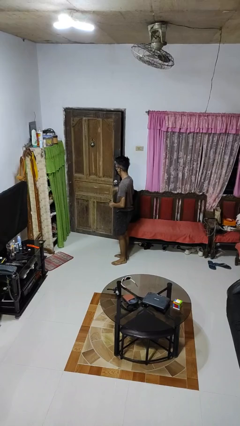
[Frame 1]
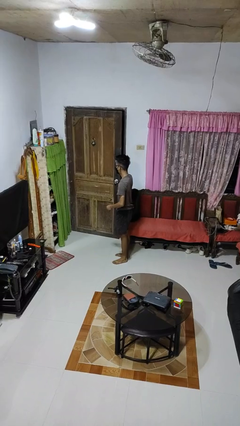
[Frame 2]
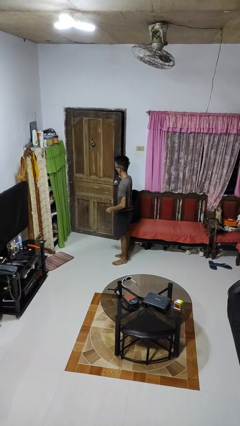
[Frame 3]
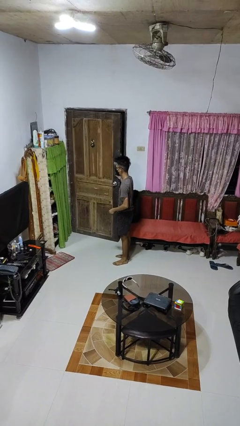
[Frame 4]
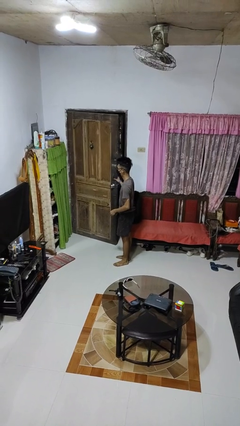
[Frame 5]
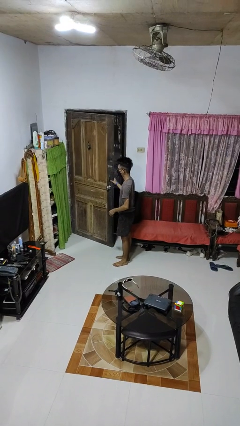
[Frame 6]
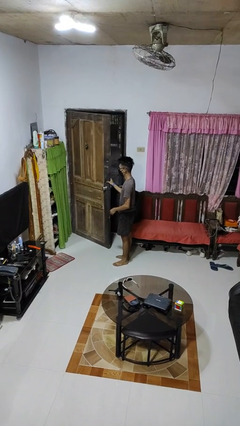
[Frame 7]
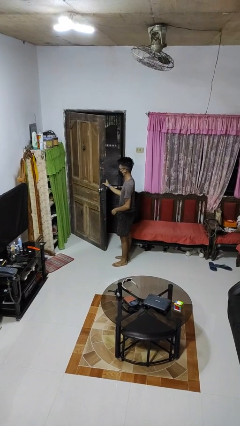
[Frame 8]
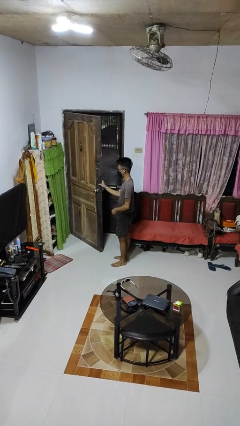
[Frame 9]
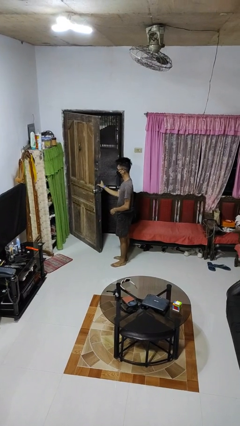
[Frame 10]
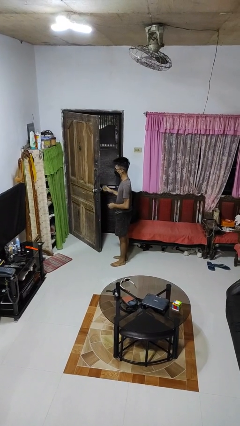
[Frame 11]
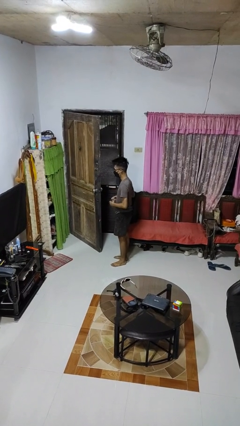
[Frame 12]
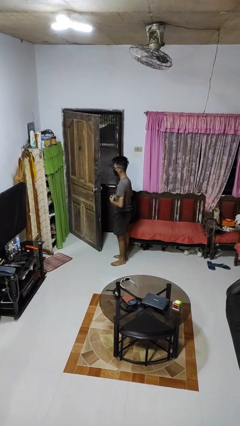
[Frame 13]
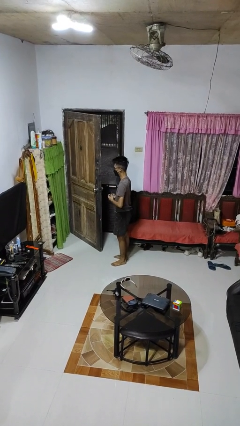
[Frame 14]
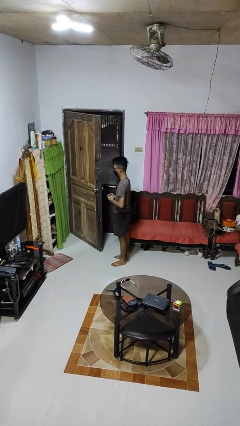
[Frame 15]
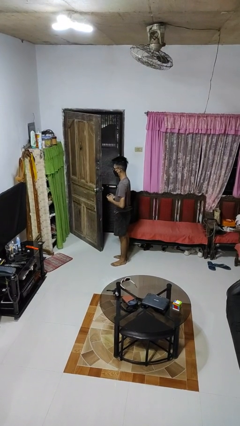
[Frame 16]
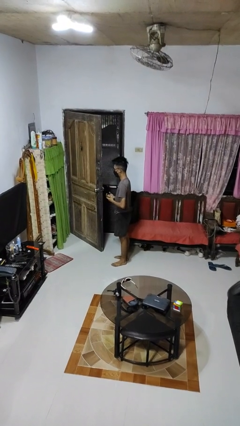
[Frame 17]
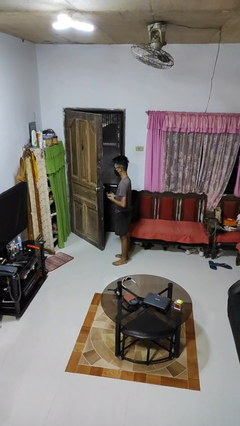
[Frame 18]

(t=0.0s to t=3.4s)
person opens facility door

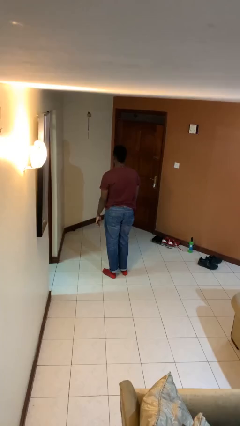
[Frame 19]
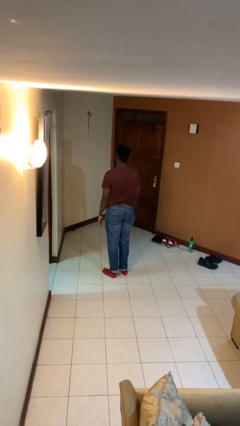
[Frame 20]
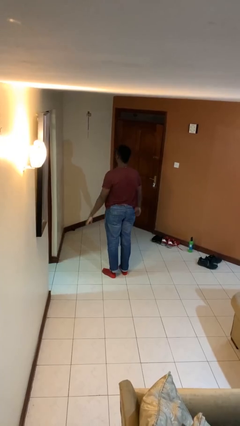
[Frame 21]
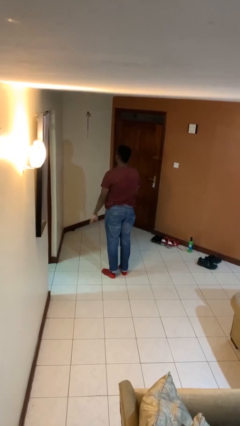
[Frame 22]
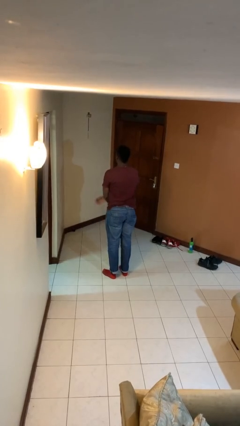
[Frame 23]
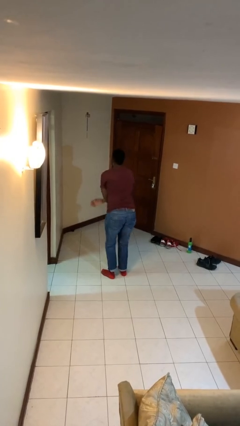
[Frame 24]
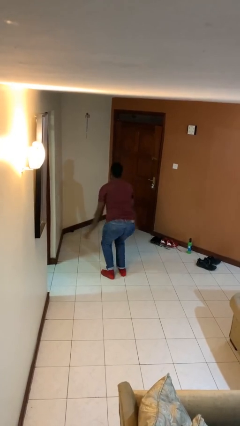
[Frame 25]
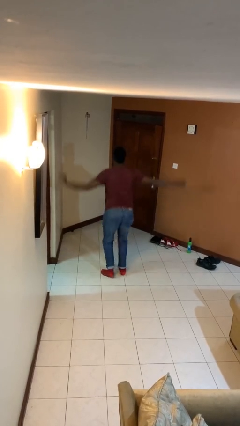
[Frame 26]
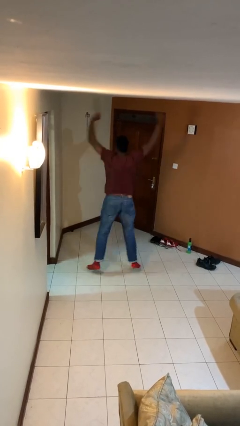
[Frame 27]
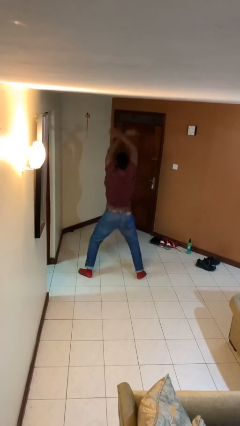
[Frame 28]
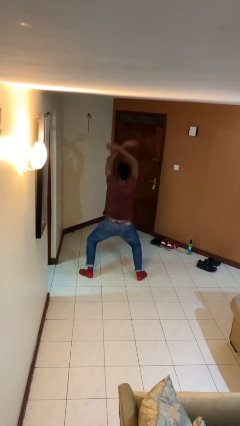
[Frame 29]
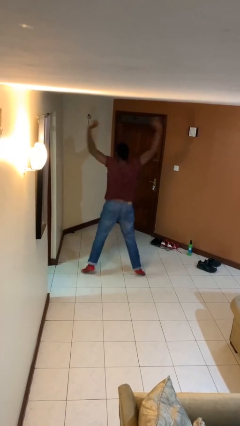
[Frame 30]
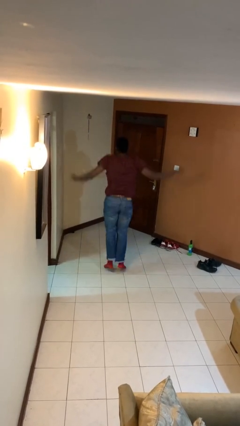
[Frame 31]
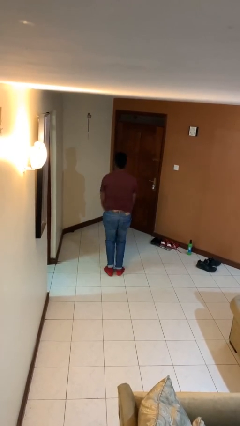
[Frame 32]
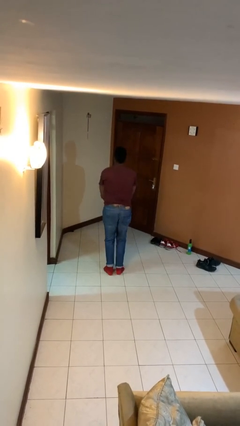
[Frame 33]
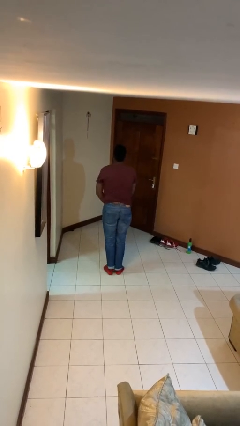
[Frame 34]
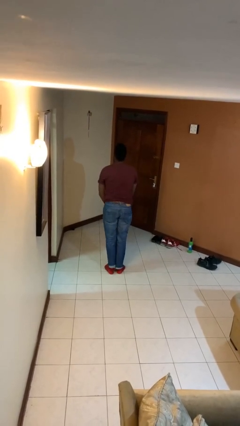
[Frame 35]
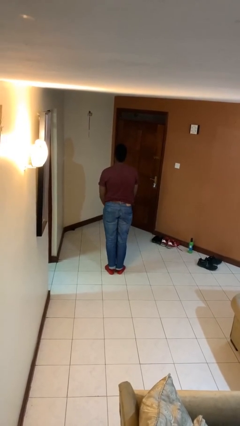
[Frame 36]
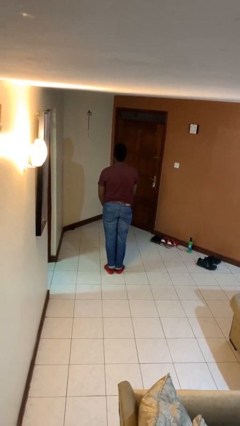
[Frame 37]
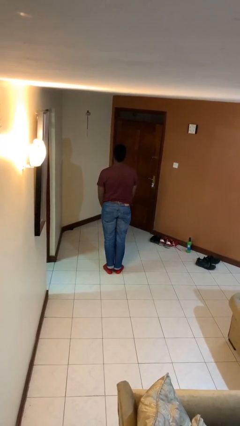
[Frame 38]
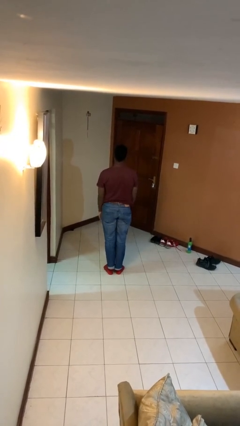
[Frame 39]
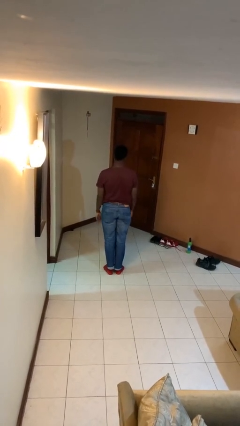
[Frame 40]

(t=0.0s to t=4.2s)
person exercises with jumping jacks

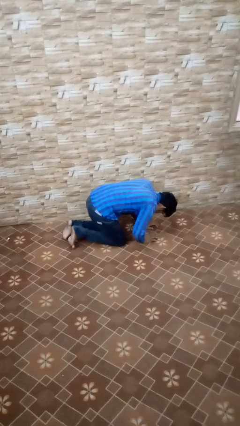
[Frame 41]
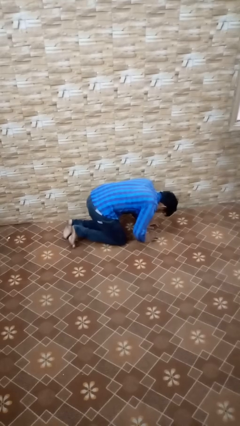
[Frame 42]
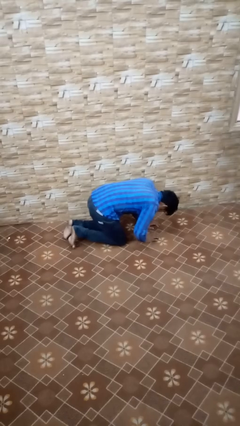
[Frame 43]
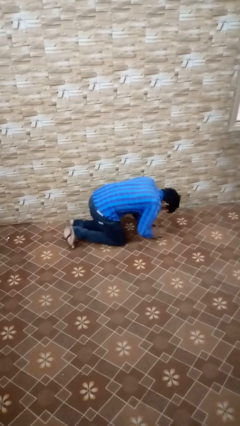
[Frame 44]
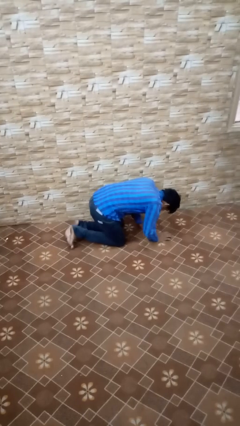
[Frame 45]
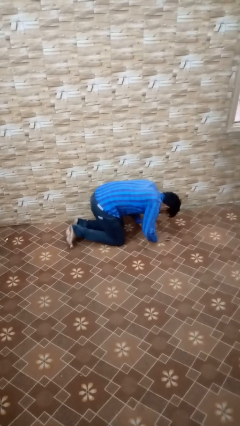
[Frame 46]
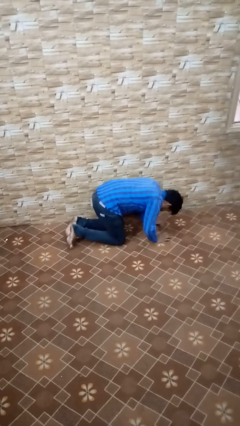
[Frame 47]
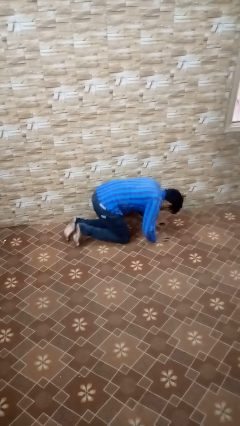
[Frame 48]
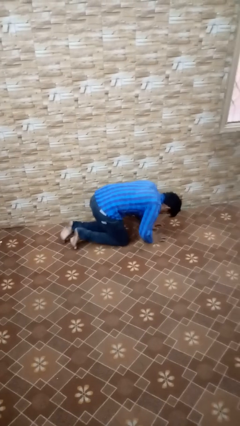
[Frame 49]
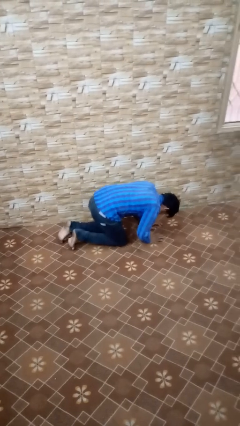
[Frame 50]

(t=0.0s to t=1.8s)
person crawls

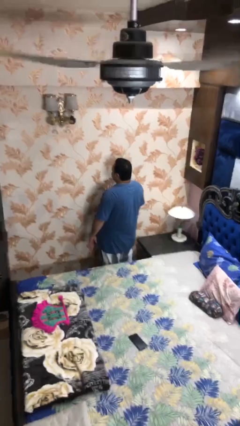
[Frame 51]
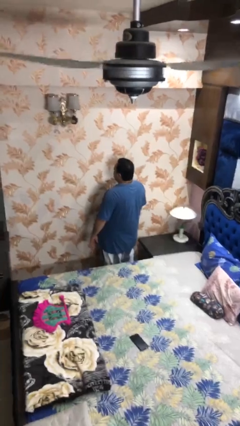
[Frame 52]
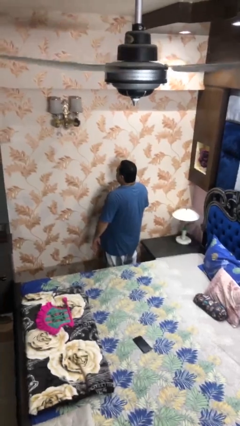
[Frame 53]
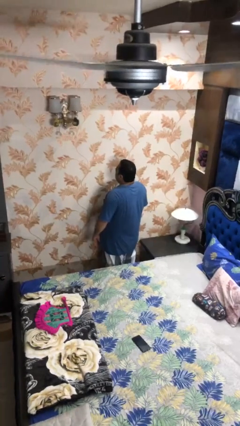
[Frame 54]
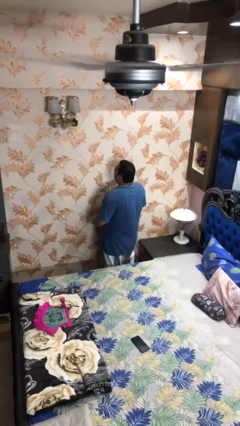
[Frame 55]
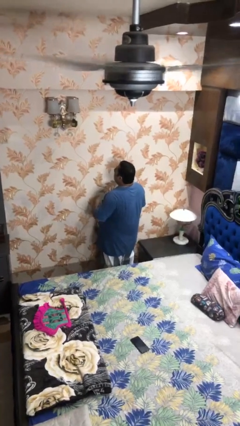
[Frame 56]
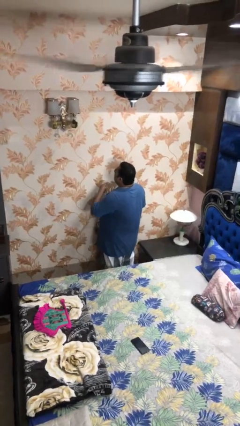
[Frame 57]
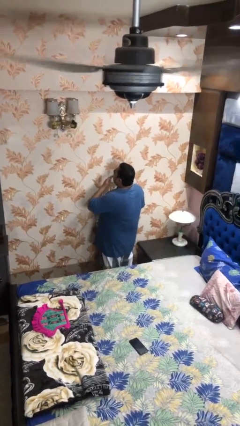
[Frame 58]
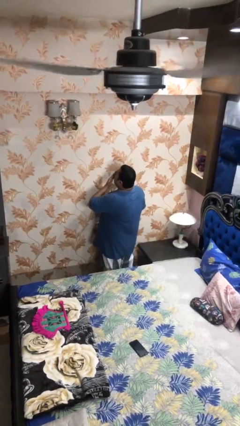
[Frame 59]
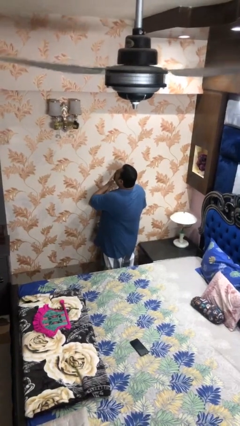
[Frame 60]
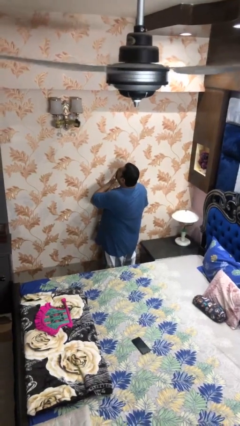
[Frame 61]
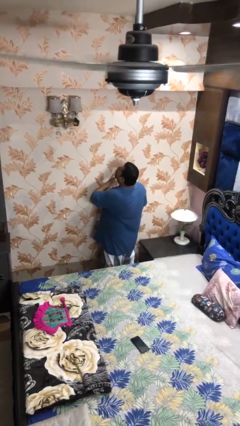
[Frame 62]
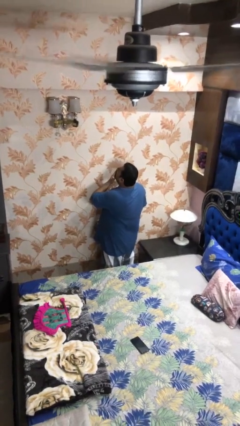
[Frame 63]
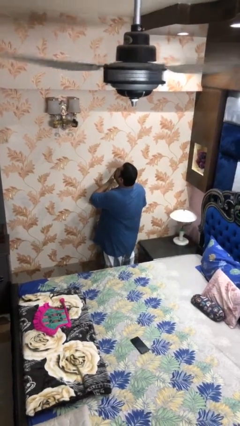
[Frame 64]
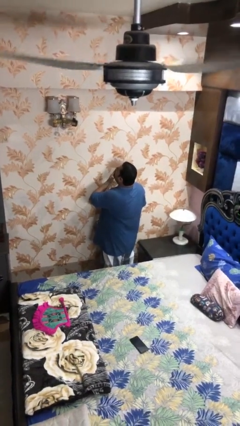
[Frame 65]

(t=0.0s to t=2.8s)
person yawns

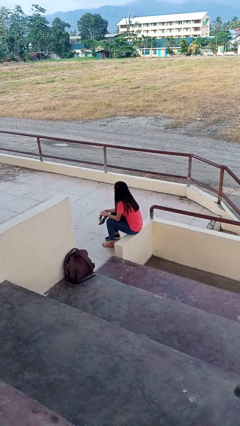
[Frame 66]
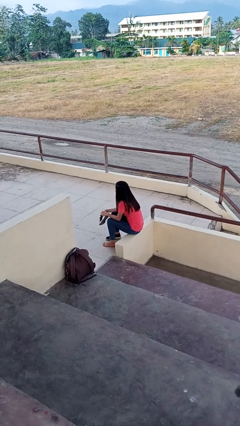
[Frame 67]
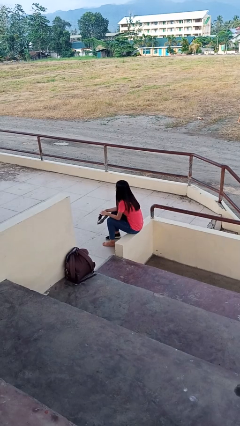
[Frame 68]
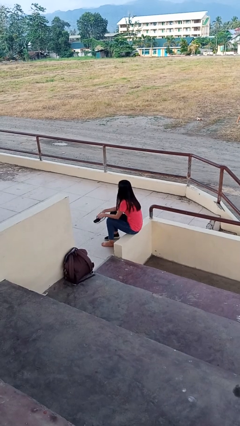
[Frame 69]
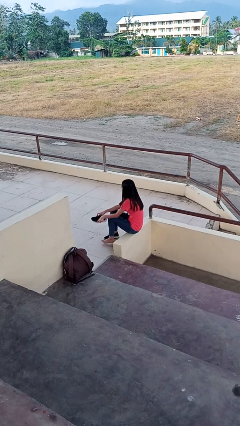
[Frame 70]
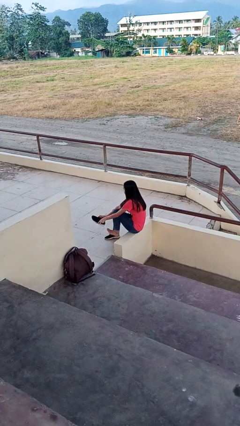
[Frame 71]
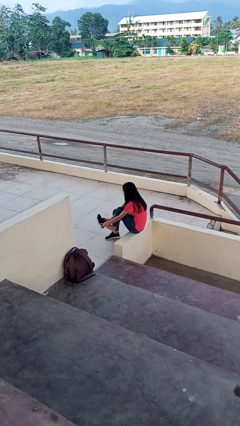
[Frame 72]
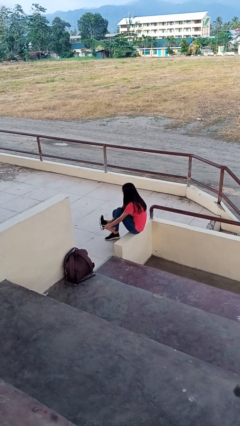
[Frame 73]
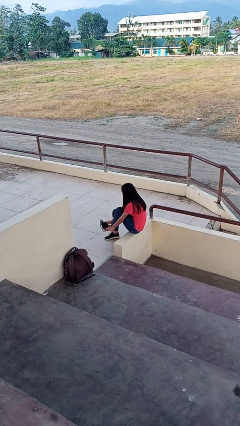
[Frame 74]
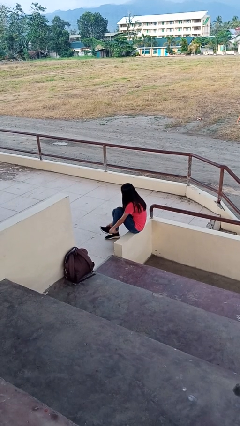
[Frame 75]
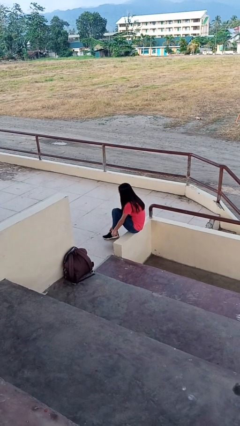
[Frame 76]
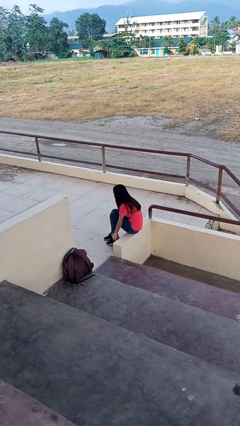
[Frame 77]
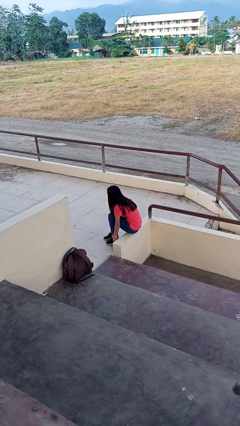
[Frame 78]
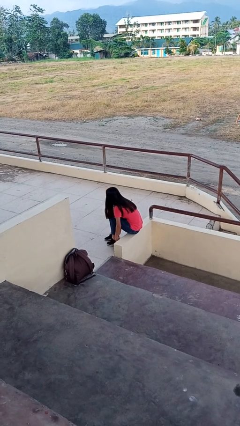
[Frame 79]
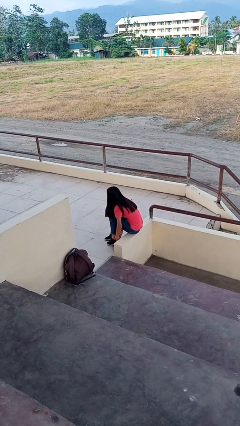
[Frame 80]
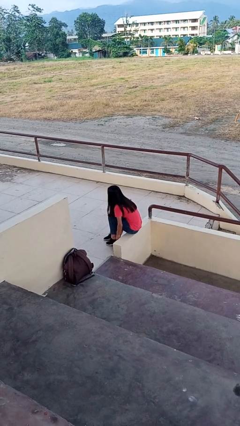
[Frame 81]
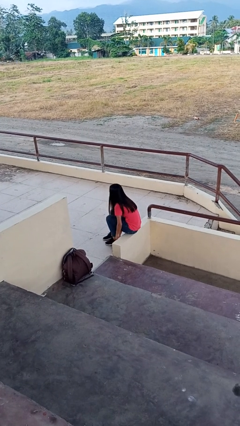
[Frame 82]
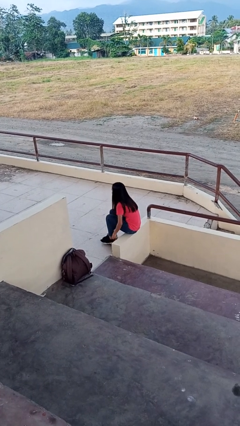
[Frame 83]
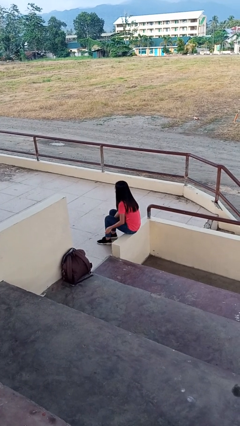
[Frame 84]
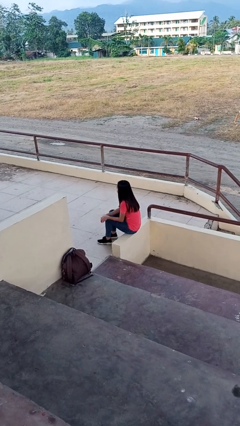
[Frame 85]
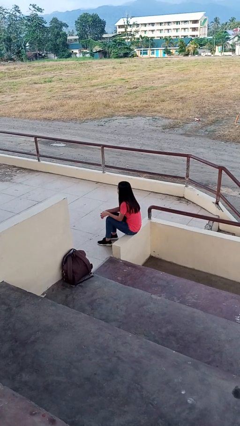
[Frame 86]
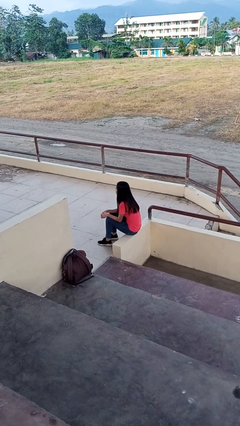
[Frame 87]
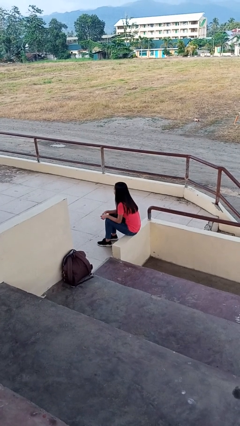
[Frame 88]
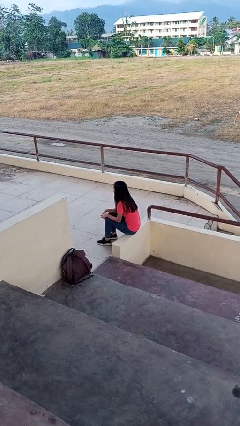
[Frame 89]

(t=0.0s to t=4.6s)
person puts on shoes

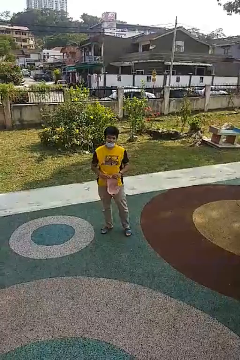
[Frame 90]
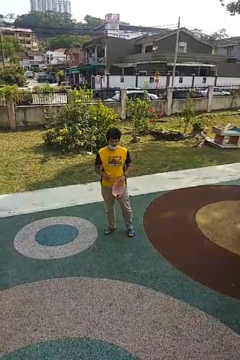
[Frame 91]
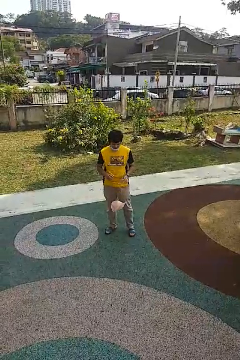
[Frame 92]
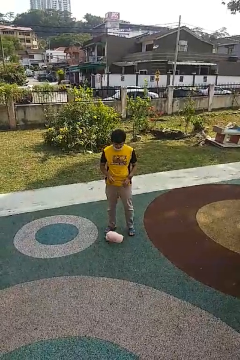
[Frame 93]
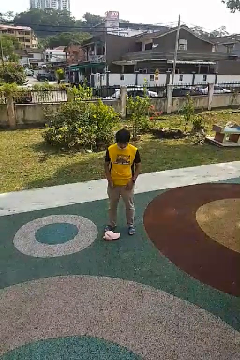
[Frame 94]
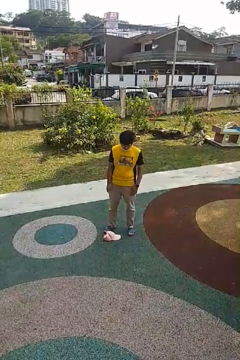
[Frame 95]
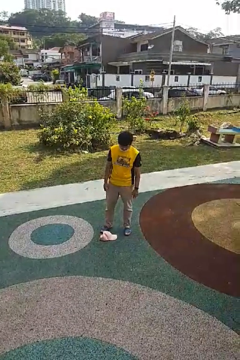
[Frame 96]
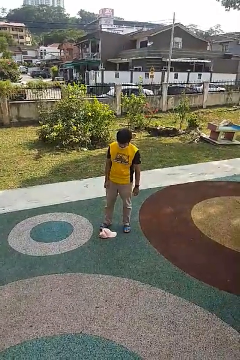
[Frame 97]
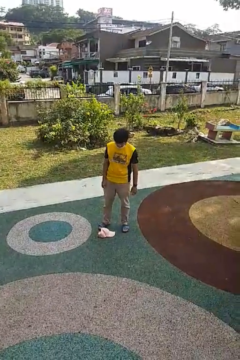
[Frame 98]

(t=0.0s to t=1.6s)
person drops object
